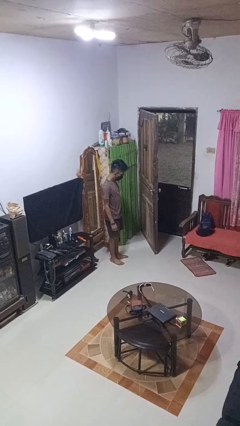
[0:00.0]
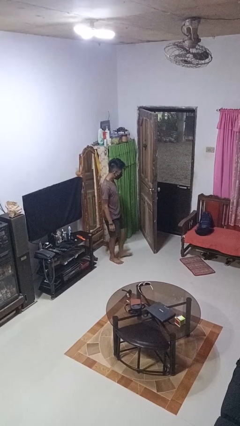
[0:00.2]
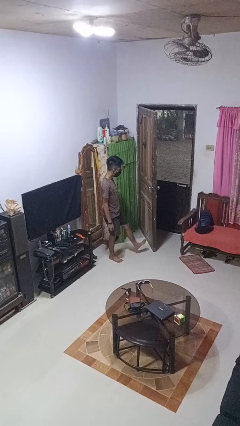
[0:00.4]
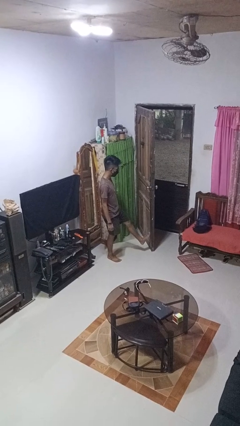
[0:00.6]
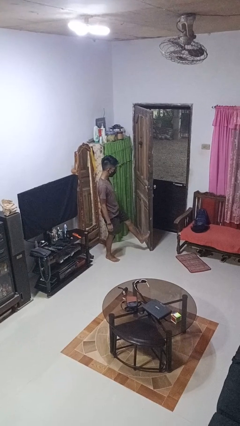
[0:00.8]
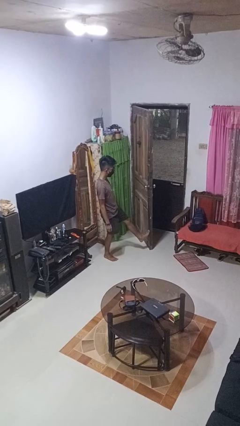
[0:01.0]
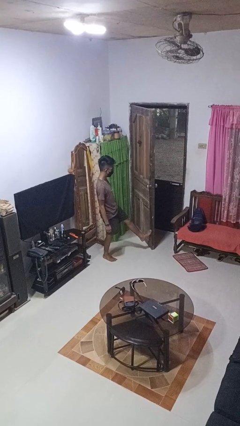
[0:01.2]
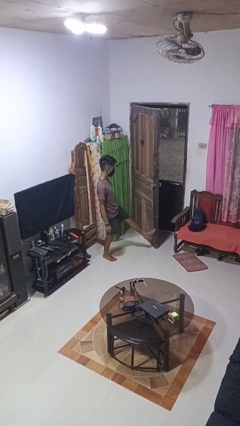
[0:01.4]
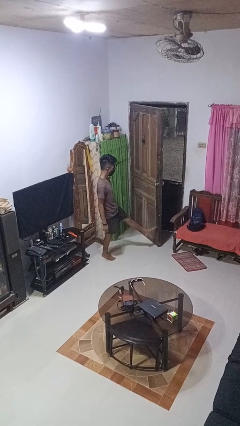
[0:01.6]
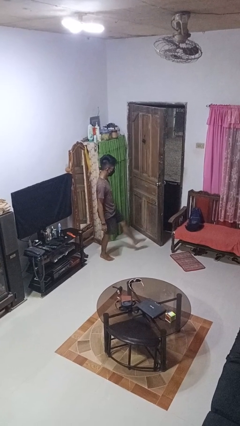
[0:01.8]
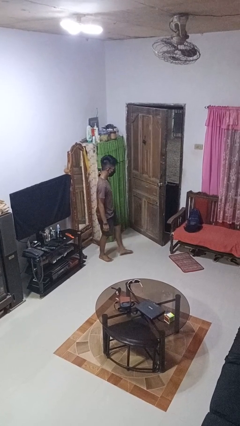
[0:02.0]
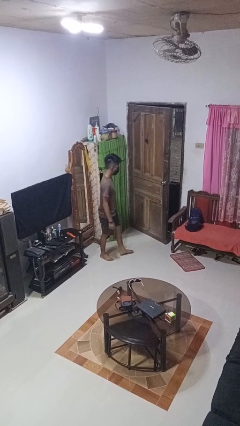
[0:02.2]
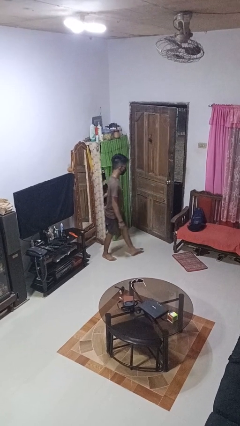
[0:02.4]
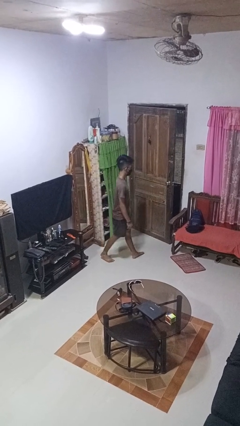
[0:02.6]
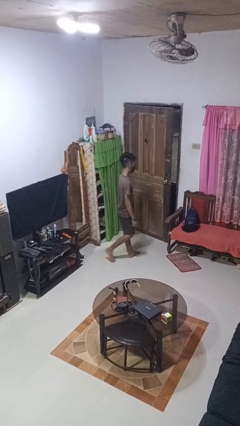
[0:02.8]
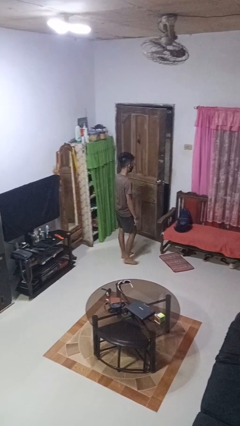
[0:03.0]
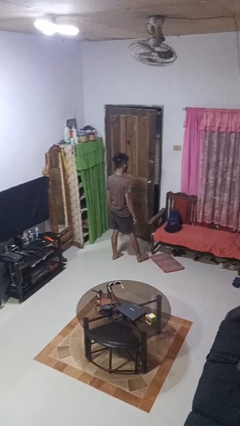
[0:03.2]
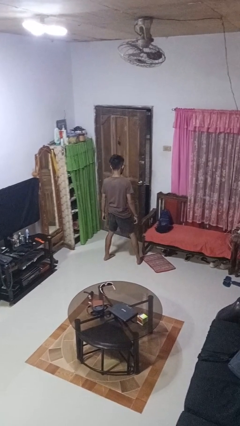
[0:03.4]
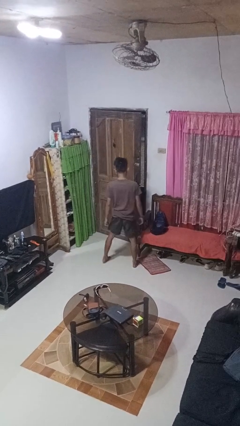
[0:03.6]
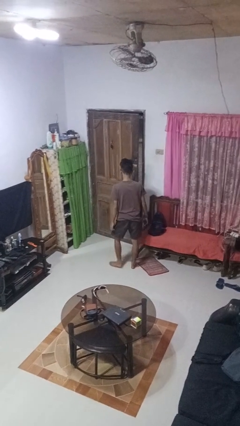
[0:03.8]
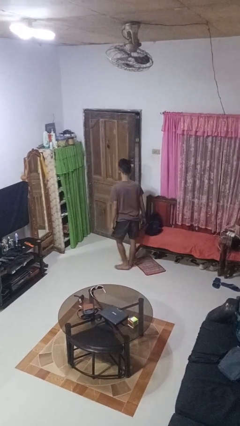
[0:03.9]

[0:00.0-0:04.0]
person closes door with foot

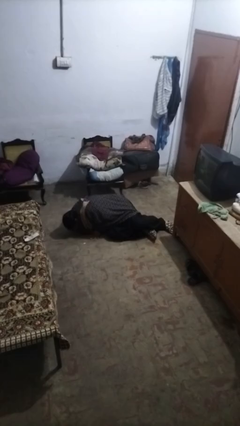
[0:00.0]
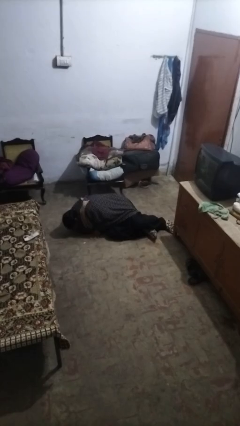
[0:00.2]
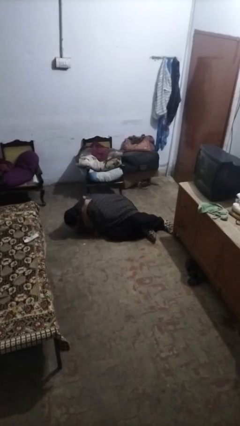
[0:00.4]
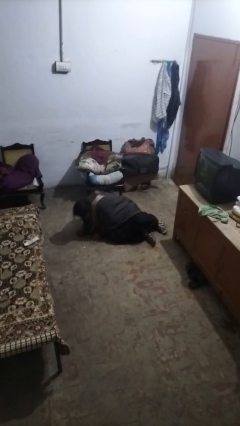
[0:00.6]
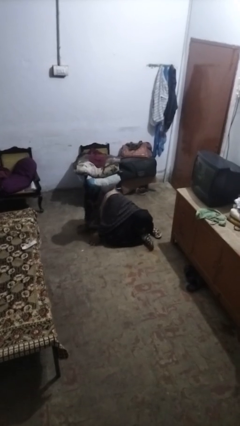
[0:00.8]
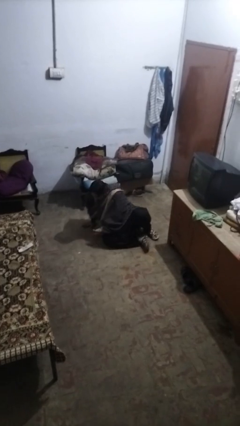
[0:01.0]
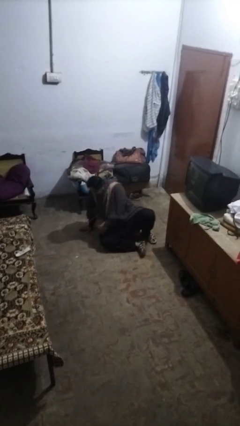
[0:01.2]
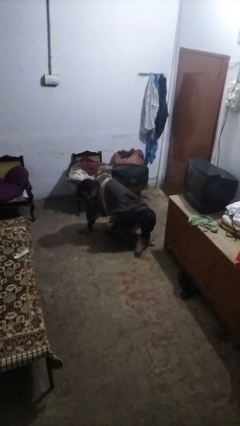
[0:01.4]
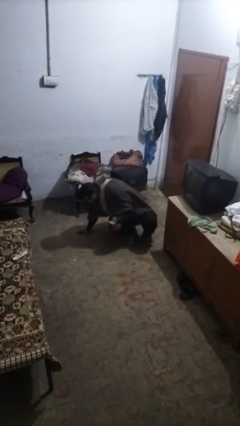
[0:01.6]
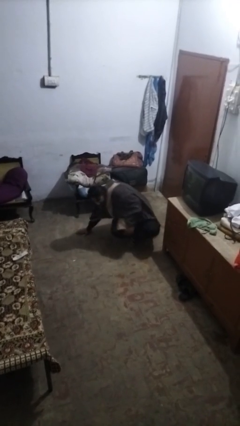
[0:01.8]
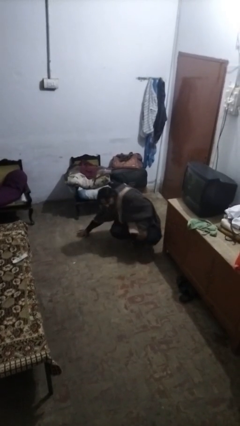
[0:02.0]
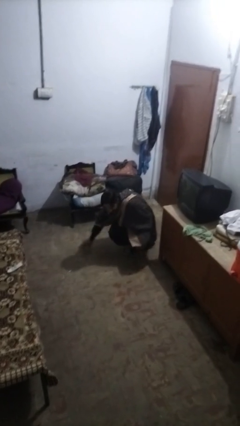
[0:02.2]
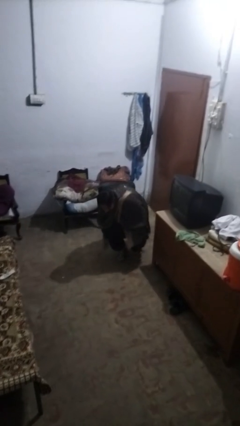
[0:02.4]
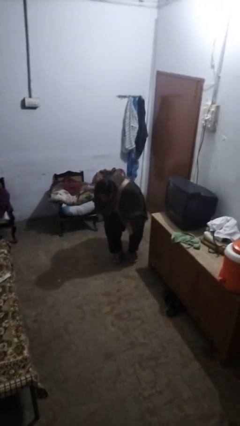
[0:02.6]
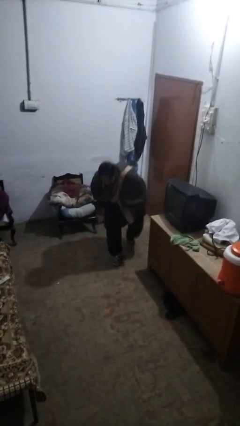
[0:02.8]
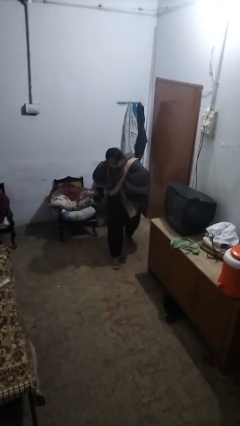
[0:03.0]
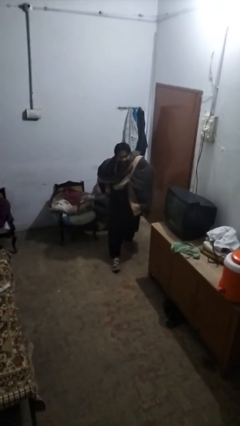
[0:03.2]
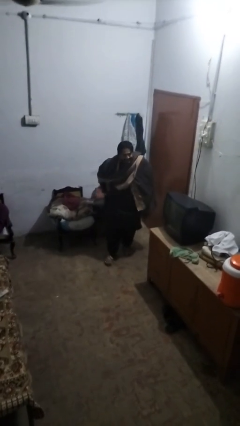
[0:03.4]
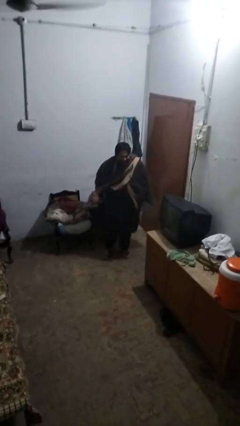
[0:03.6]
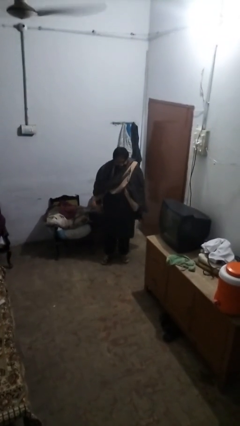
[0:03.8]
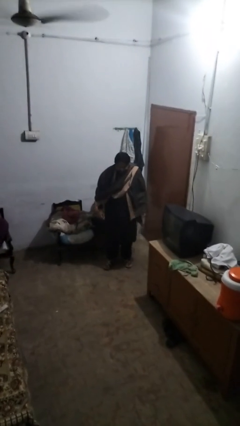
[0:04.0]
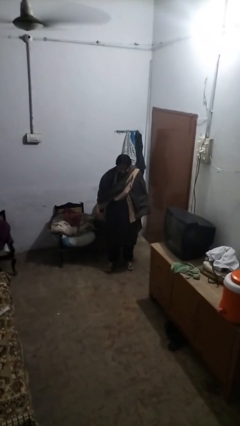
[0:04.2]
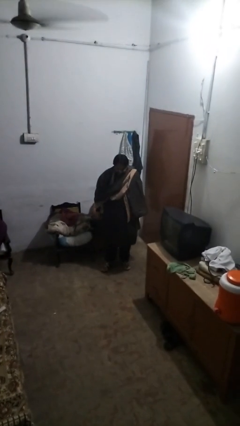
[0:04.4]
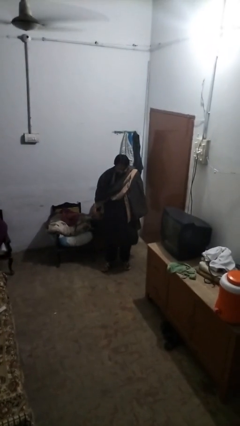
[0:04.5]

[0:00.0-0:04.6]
person stands up from floor

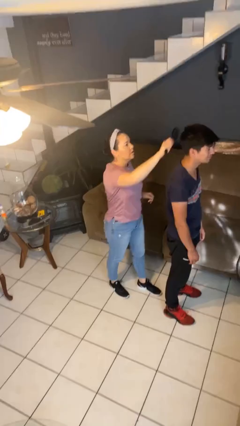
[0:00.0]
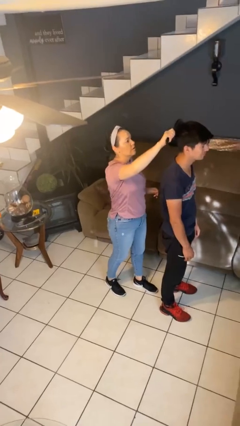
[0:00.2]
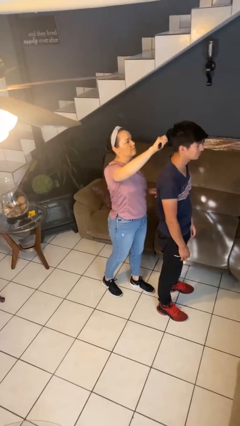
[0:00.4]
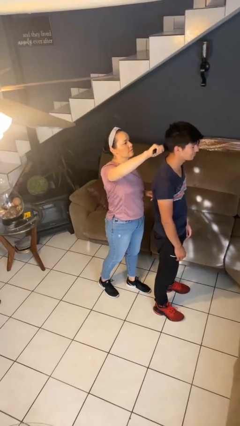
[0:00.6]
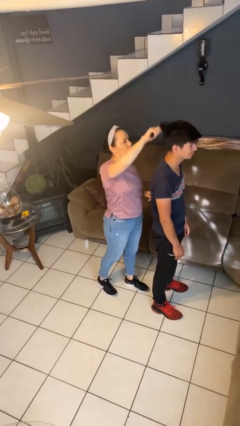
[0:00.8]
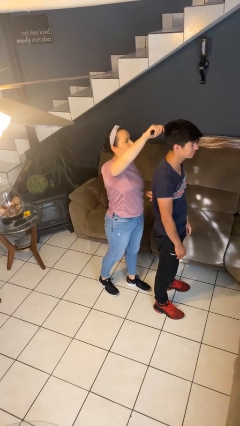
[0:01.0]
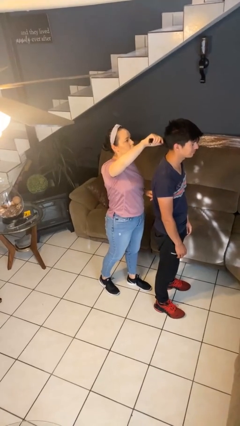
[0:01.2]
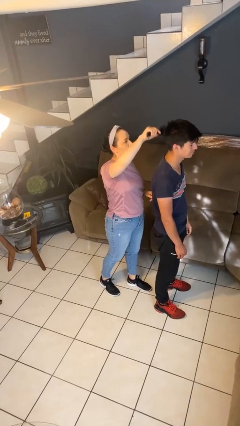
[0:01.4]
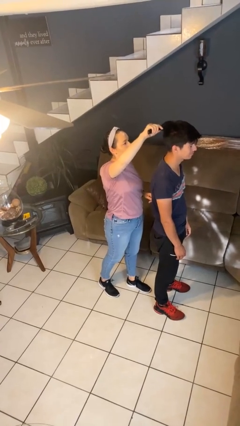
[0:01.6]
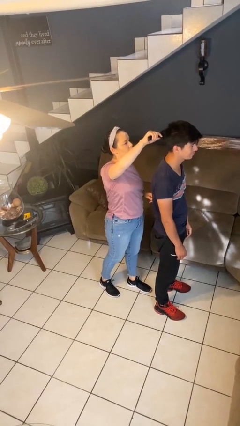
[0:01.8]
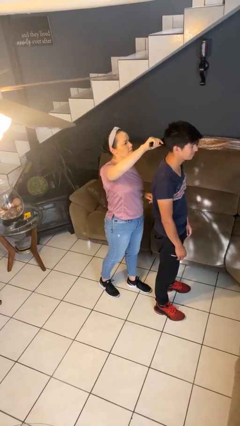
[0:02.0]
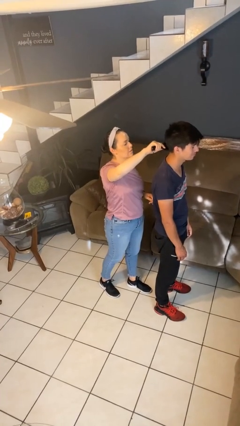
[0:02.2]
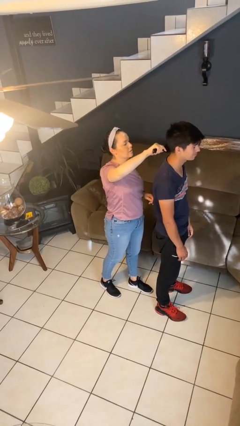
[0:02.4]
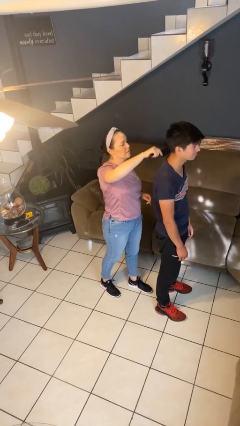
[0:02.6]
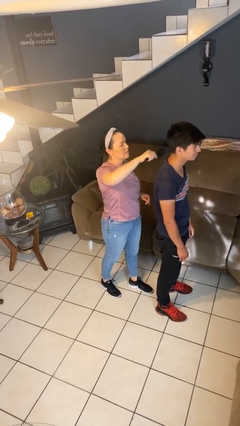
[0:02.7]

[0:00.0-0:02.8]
person brushes hair of person

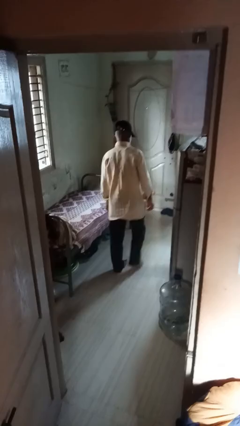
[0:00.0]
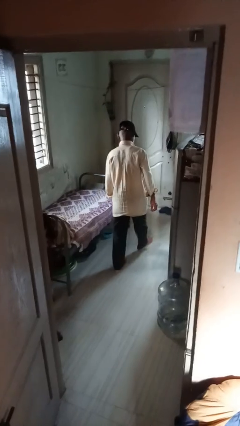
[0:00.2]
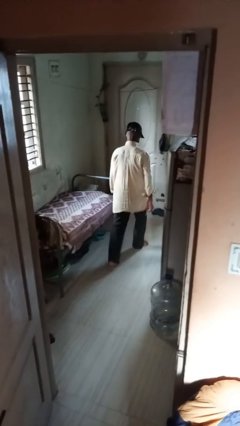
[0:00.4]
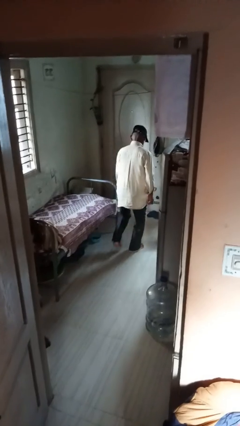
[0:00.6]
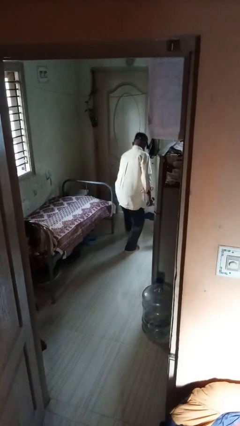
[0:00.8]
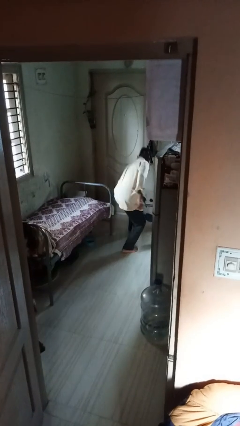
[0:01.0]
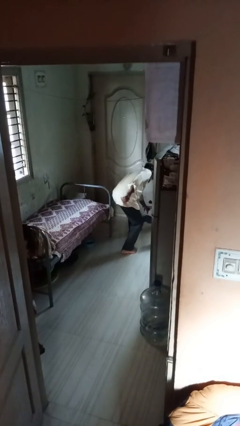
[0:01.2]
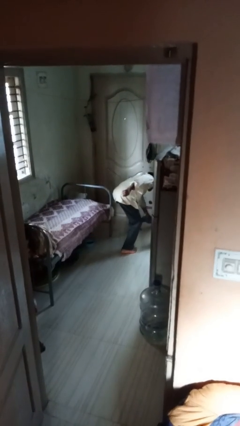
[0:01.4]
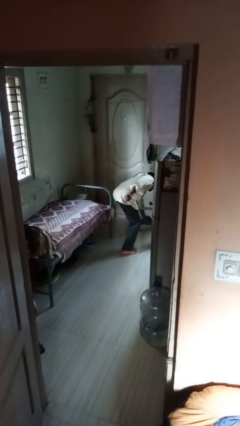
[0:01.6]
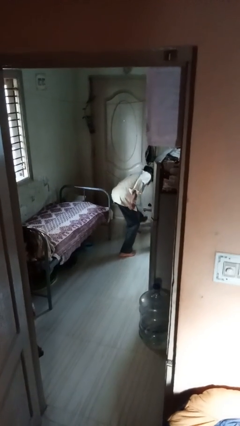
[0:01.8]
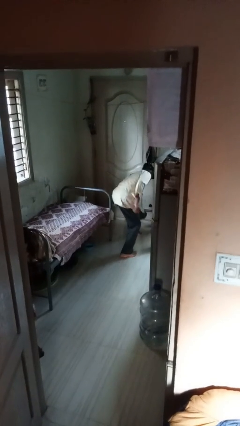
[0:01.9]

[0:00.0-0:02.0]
person picks up object from floor

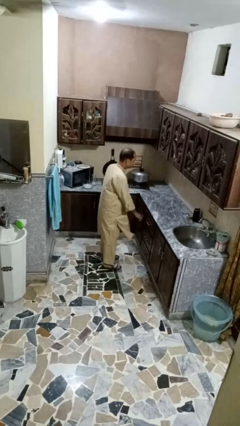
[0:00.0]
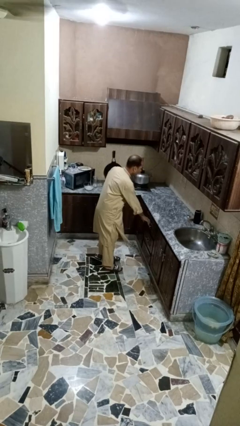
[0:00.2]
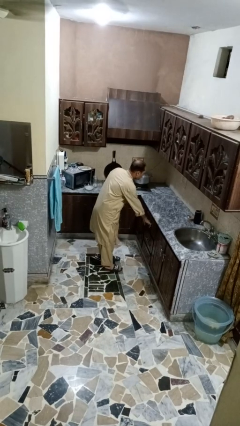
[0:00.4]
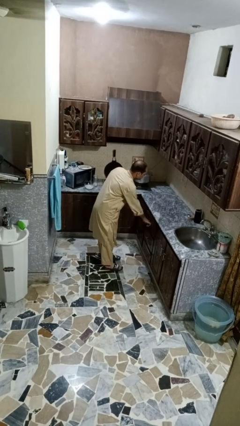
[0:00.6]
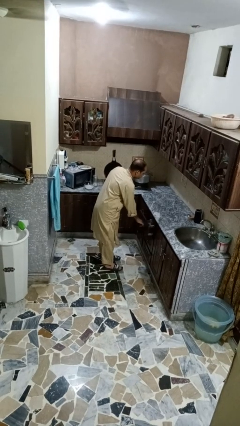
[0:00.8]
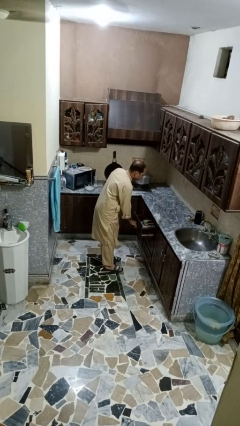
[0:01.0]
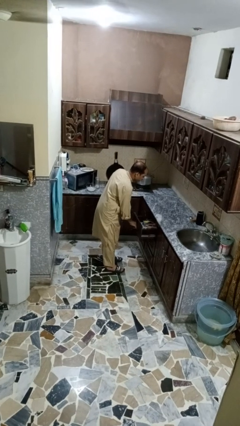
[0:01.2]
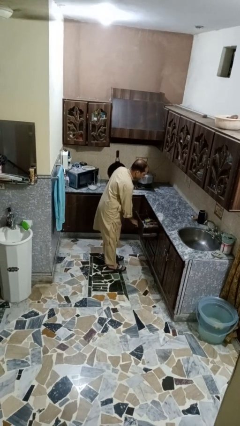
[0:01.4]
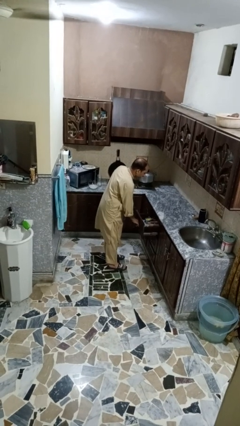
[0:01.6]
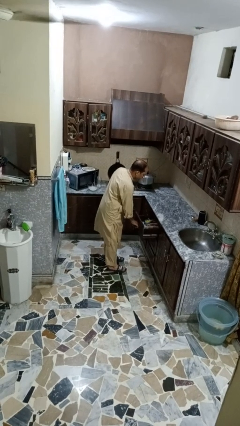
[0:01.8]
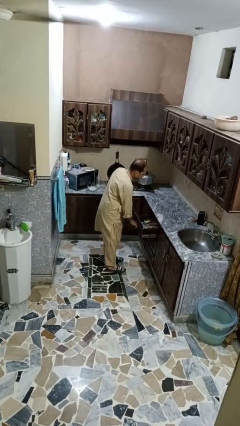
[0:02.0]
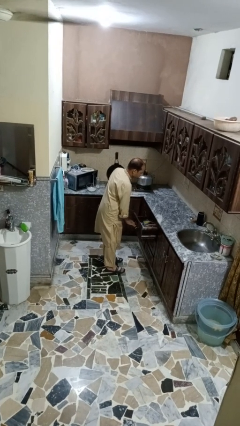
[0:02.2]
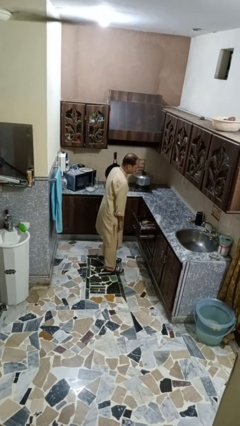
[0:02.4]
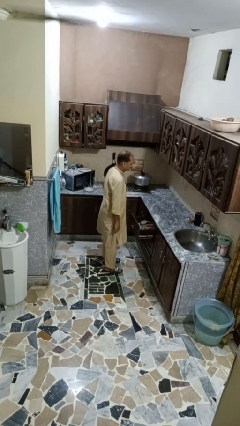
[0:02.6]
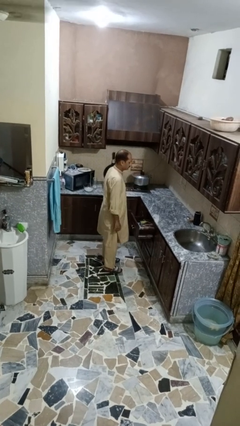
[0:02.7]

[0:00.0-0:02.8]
person opens kitchen drawer

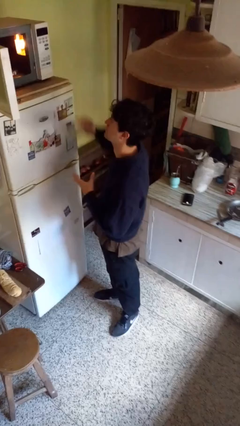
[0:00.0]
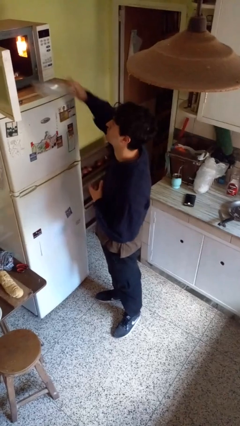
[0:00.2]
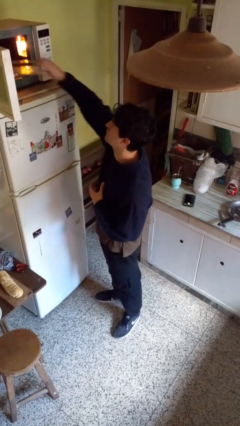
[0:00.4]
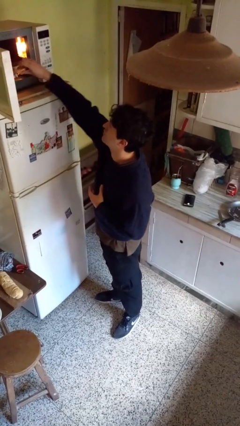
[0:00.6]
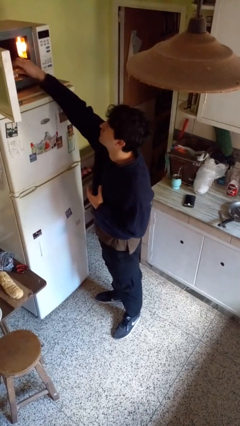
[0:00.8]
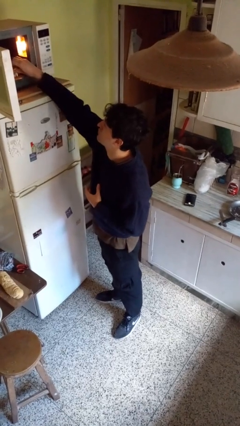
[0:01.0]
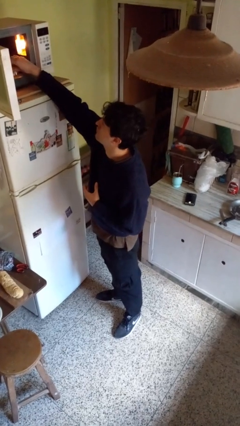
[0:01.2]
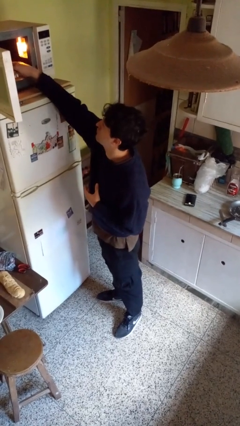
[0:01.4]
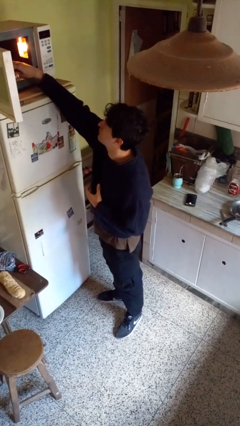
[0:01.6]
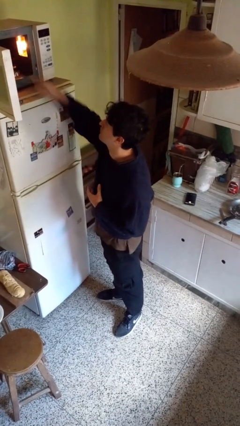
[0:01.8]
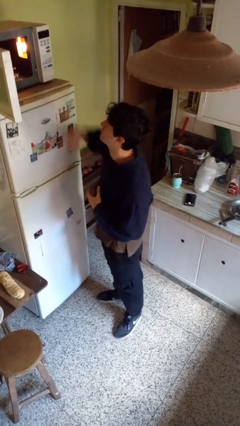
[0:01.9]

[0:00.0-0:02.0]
person puts object into microwave
